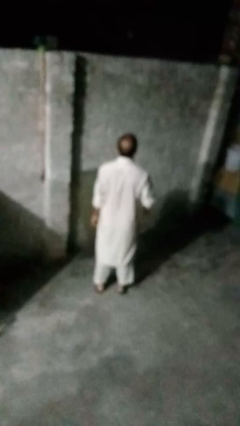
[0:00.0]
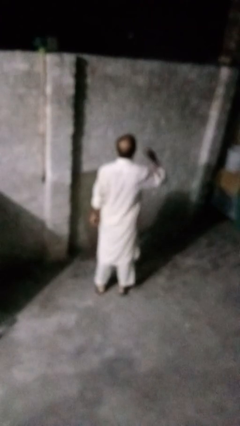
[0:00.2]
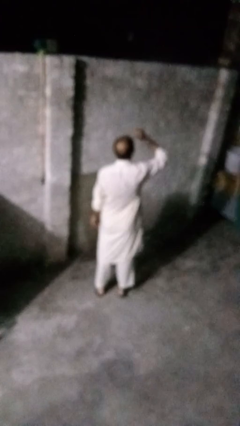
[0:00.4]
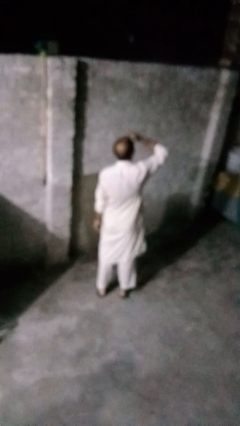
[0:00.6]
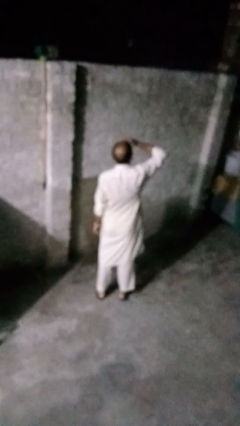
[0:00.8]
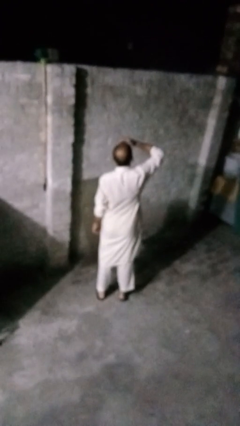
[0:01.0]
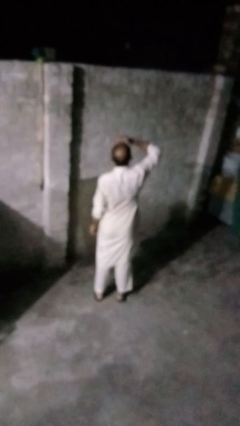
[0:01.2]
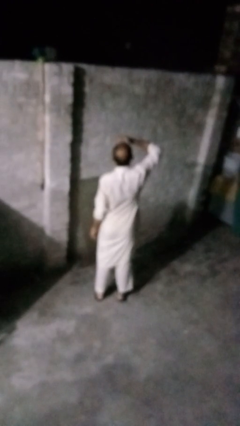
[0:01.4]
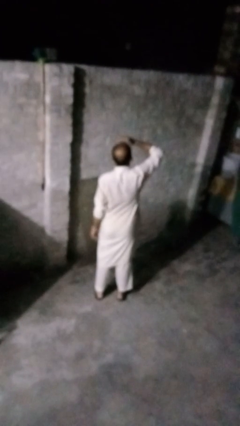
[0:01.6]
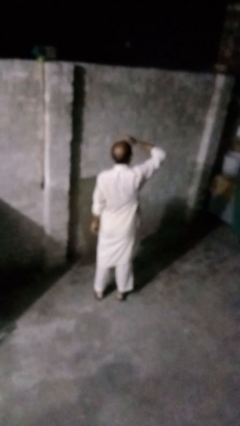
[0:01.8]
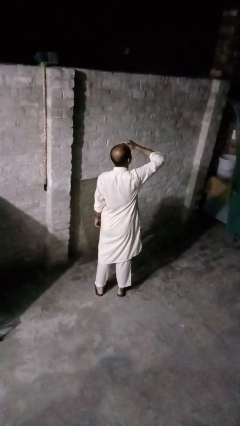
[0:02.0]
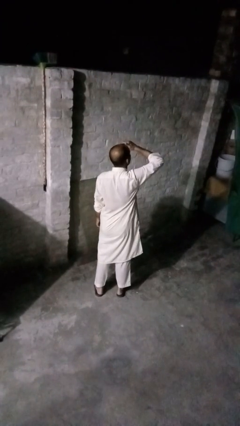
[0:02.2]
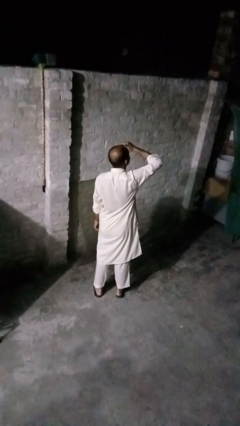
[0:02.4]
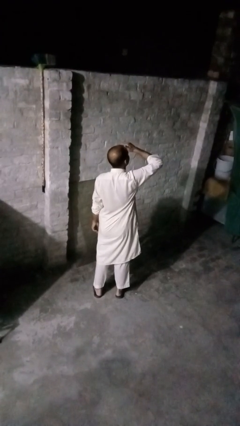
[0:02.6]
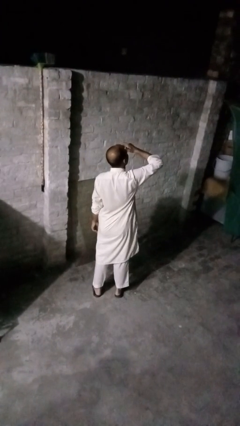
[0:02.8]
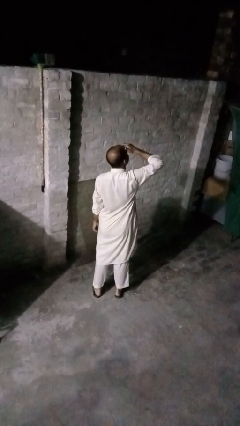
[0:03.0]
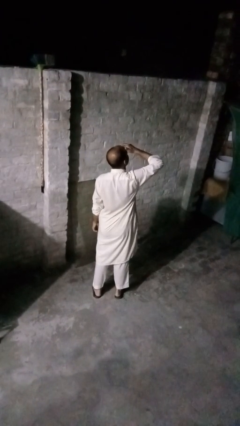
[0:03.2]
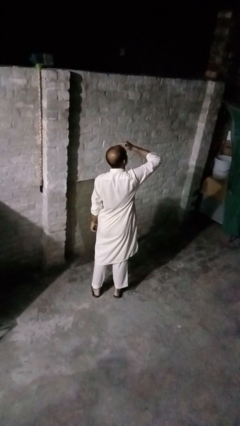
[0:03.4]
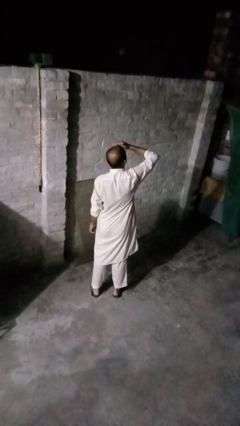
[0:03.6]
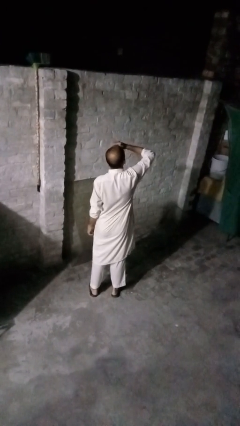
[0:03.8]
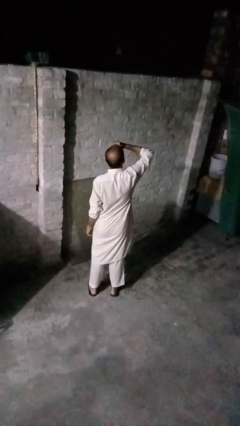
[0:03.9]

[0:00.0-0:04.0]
person shades eyes

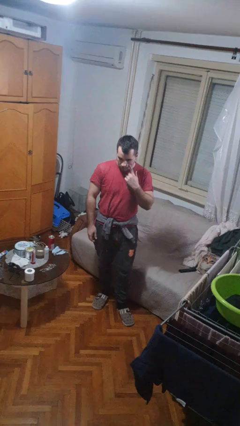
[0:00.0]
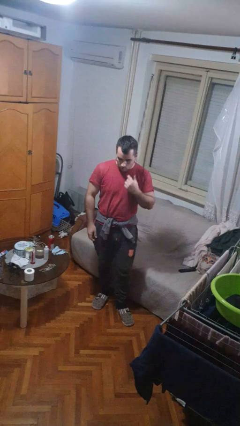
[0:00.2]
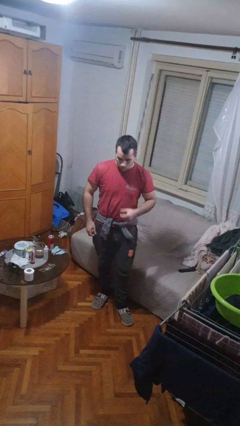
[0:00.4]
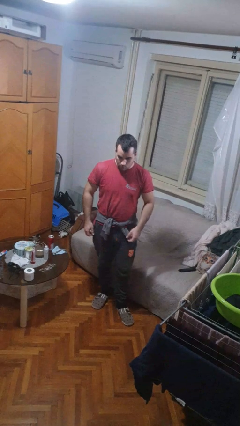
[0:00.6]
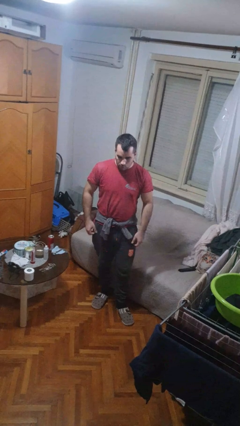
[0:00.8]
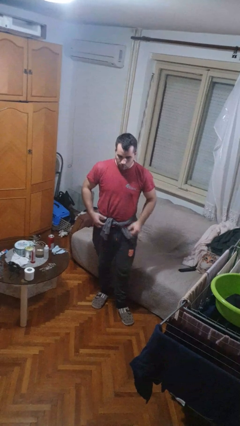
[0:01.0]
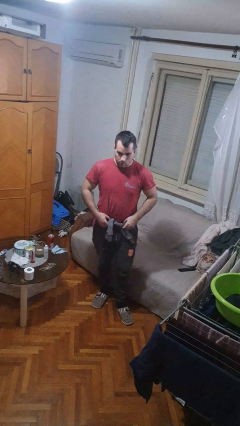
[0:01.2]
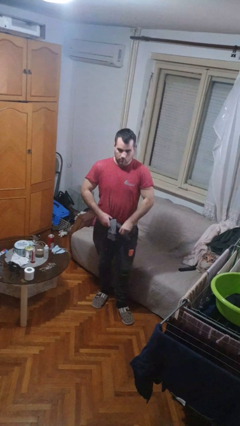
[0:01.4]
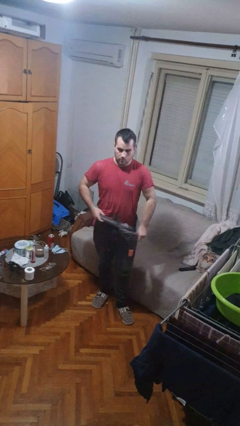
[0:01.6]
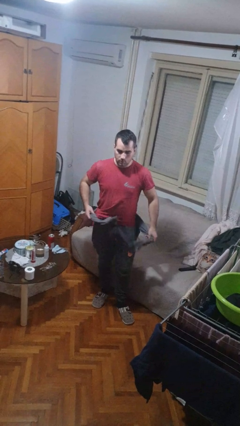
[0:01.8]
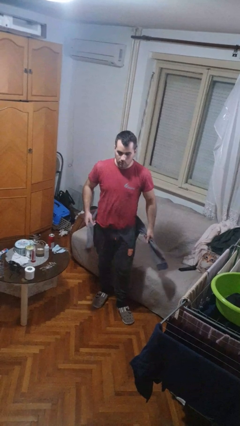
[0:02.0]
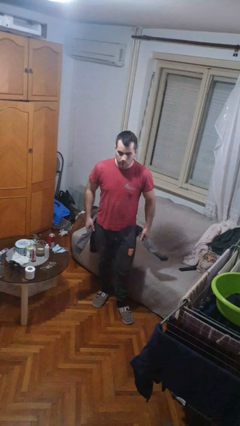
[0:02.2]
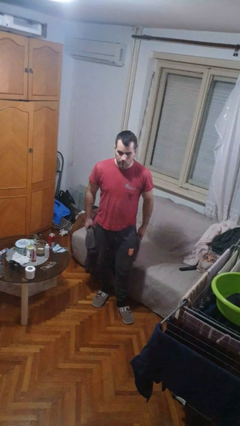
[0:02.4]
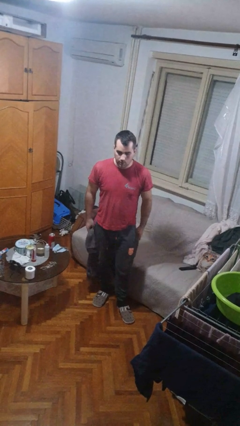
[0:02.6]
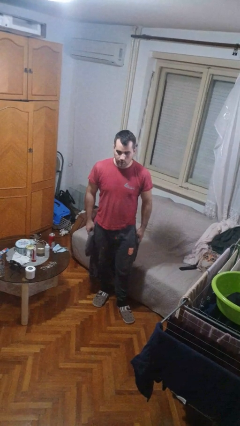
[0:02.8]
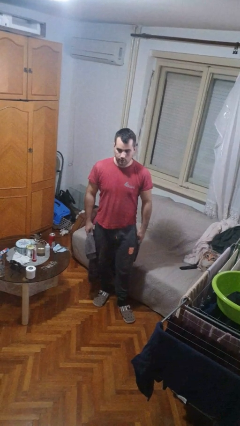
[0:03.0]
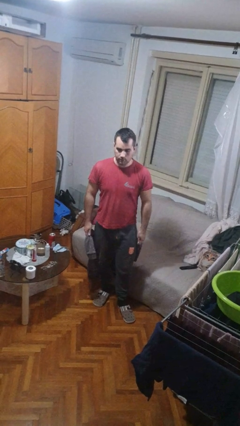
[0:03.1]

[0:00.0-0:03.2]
person unties jacket around waist

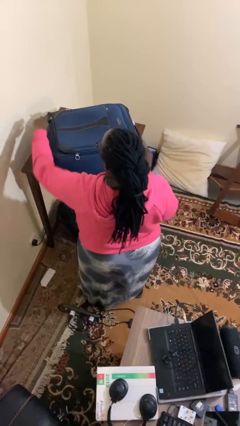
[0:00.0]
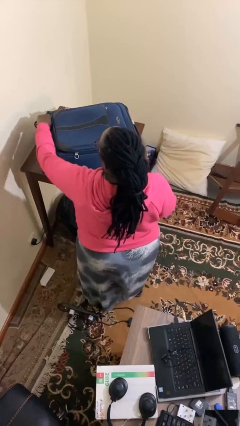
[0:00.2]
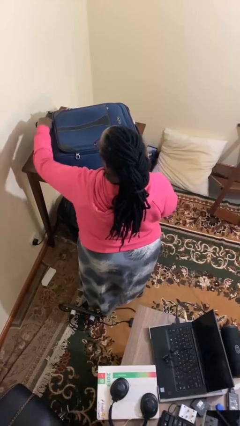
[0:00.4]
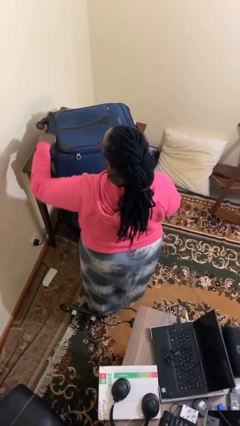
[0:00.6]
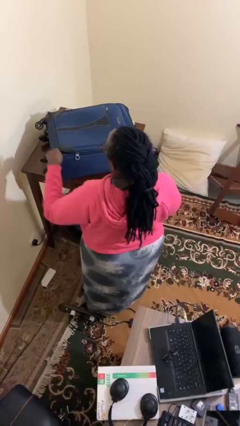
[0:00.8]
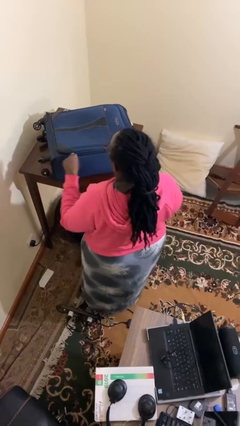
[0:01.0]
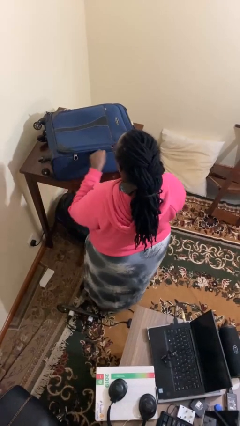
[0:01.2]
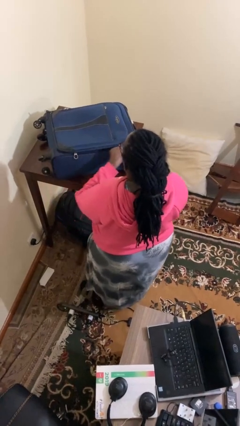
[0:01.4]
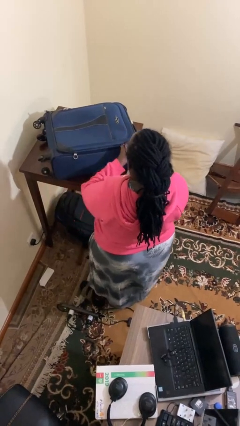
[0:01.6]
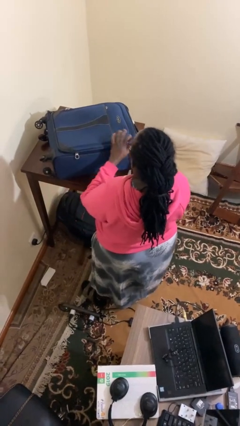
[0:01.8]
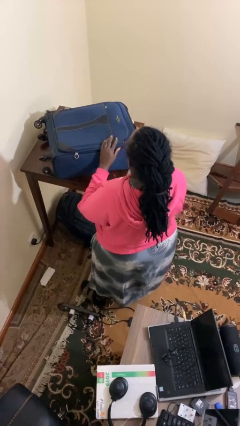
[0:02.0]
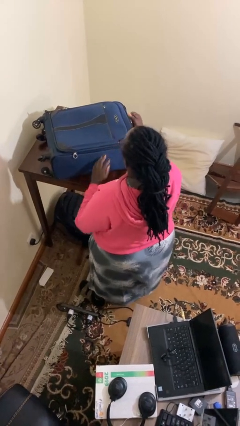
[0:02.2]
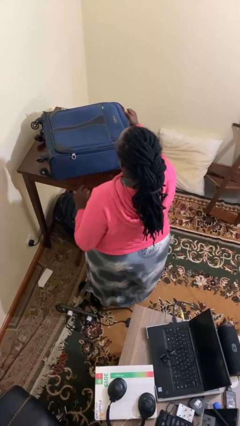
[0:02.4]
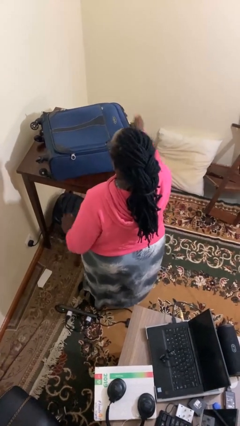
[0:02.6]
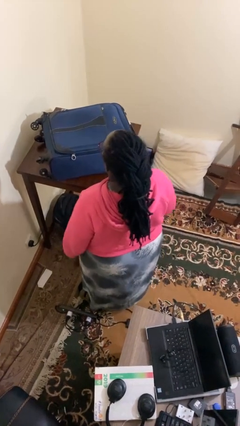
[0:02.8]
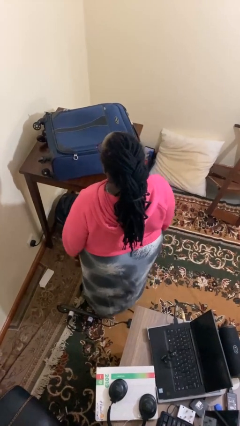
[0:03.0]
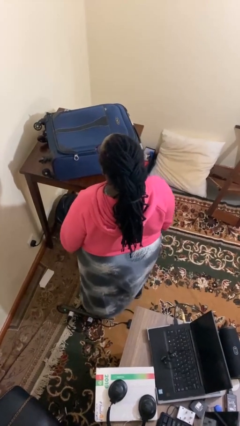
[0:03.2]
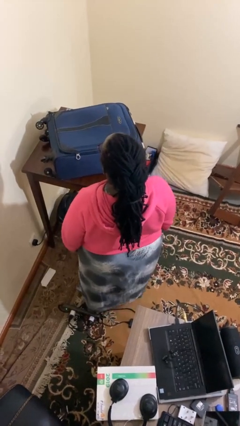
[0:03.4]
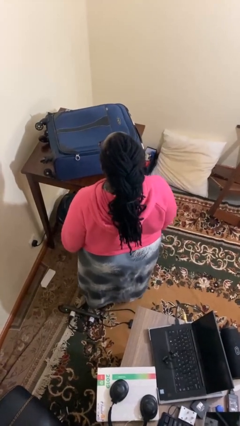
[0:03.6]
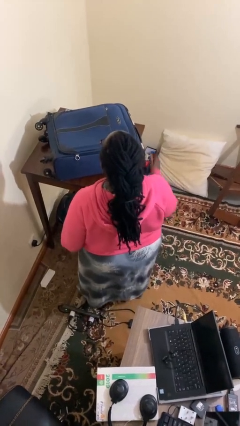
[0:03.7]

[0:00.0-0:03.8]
person takes object from kitchen drawer

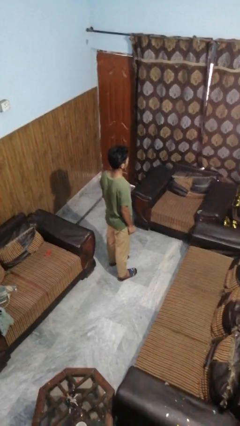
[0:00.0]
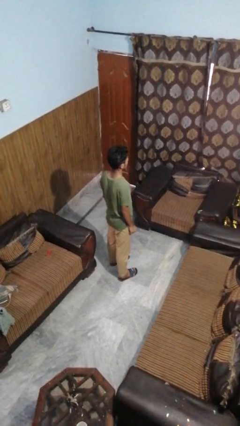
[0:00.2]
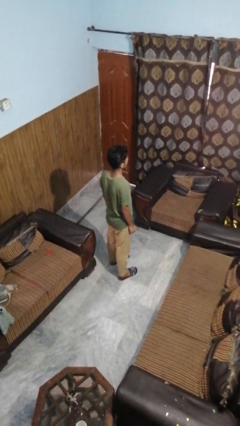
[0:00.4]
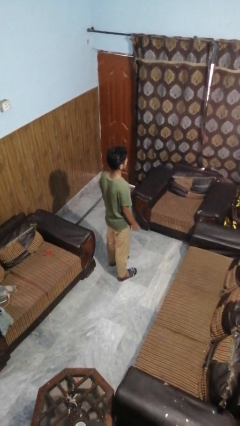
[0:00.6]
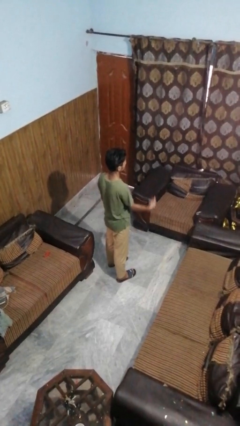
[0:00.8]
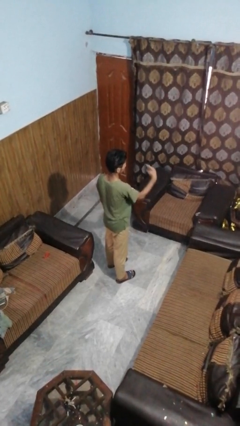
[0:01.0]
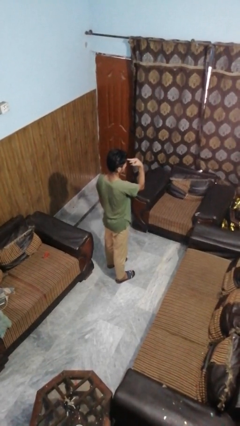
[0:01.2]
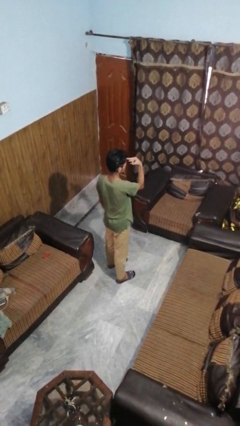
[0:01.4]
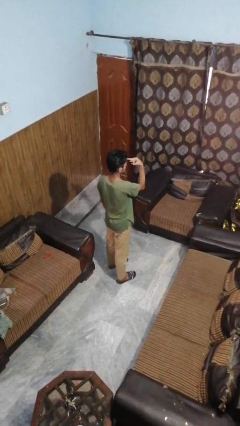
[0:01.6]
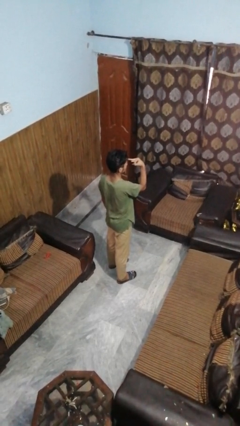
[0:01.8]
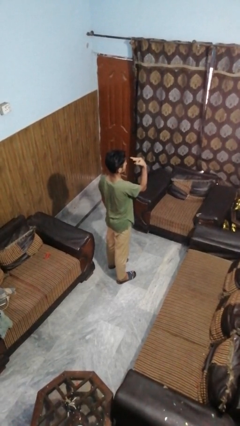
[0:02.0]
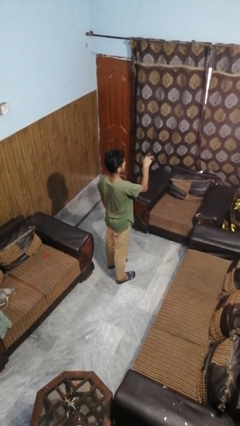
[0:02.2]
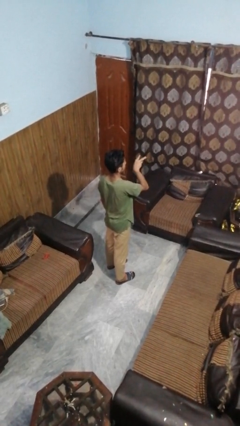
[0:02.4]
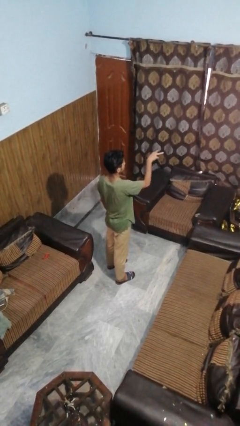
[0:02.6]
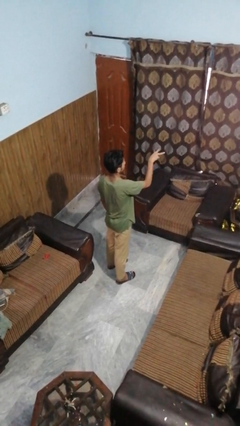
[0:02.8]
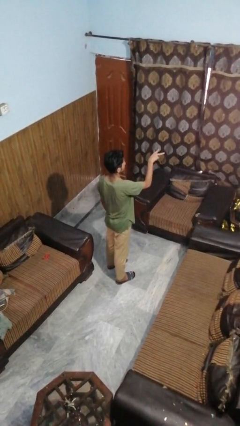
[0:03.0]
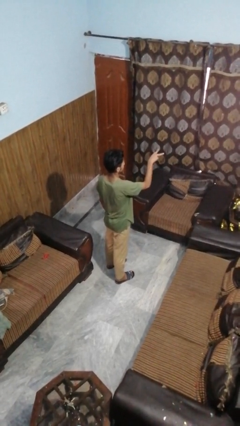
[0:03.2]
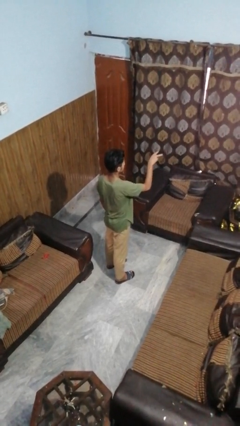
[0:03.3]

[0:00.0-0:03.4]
person gestures watch closely

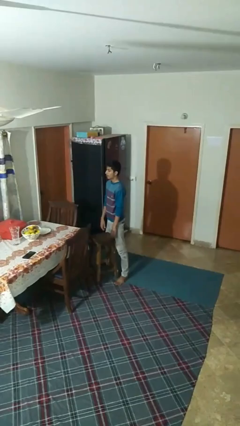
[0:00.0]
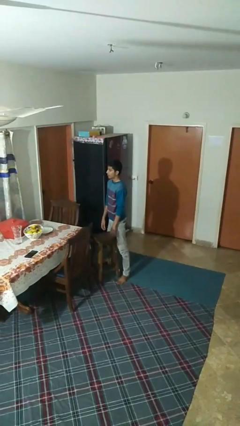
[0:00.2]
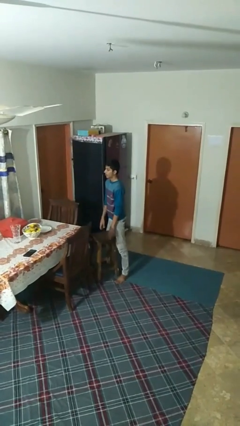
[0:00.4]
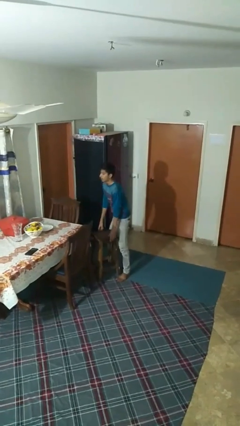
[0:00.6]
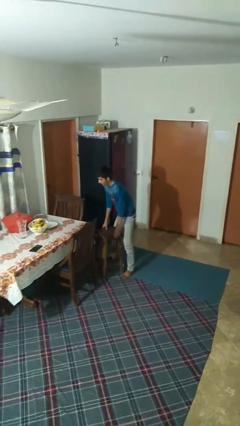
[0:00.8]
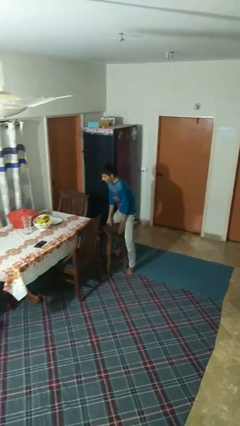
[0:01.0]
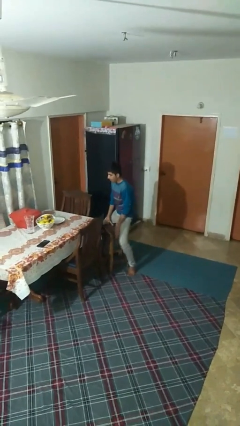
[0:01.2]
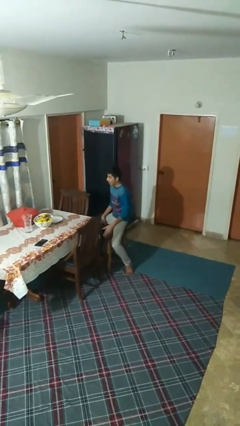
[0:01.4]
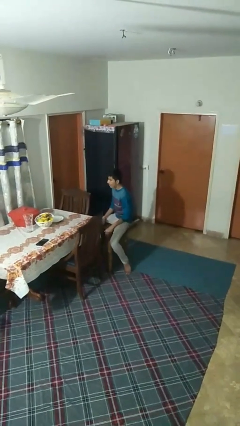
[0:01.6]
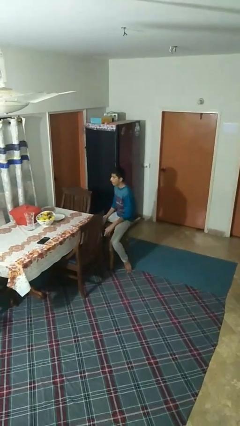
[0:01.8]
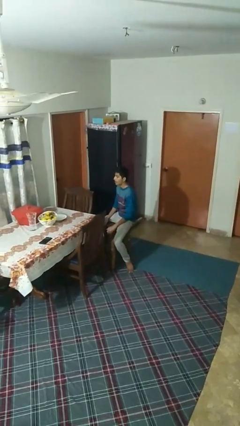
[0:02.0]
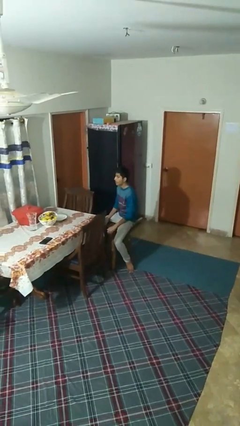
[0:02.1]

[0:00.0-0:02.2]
person sits down

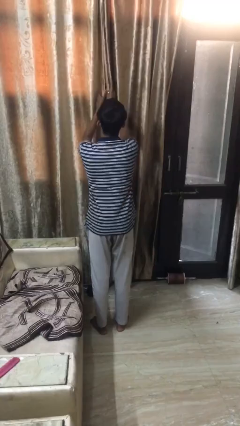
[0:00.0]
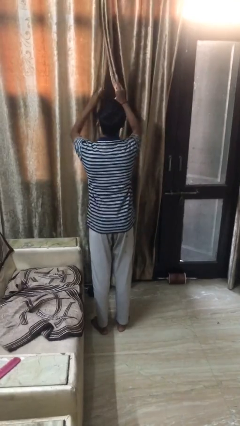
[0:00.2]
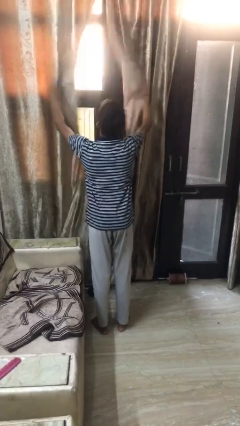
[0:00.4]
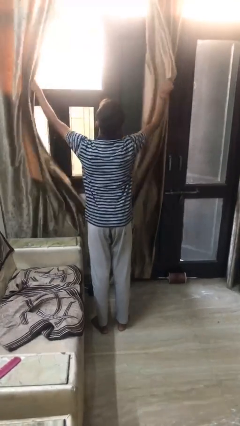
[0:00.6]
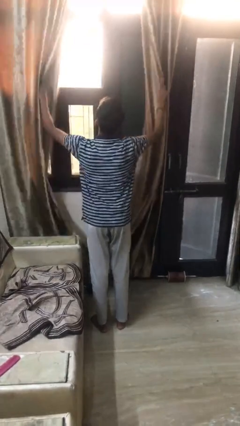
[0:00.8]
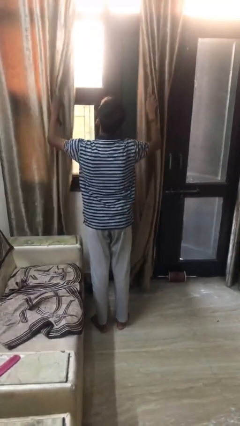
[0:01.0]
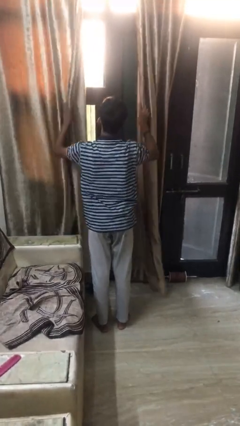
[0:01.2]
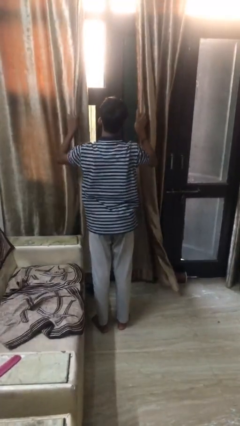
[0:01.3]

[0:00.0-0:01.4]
person opens curtains
